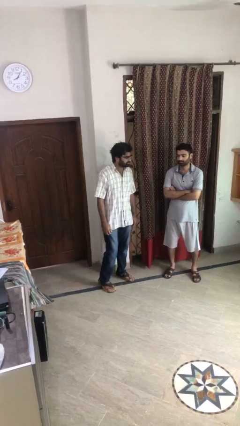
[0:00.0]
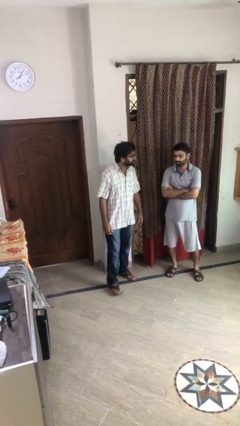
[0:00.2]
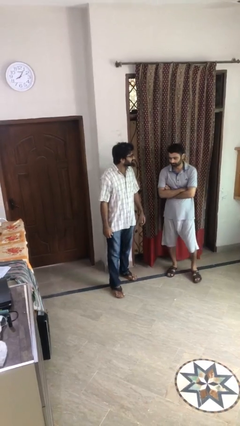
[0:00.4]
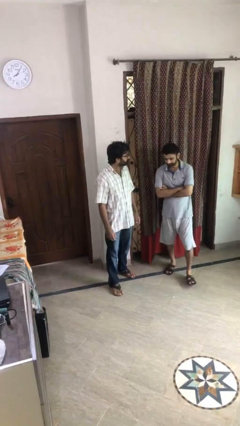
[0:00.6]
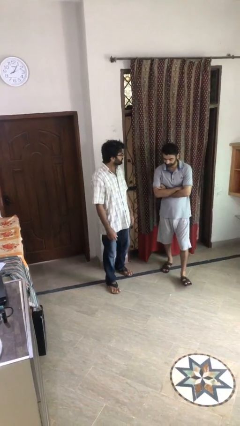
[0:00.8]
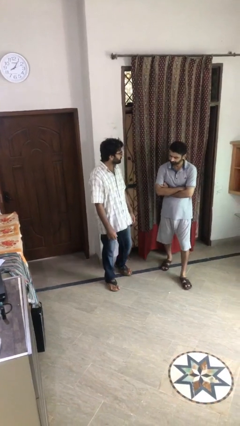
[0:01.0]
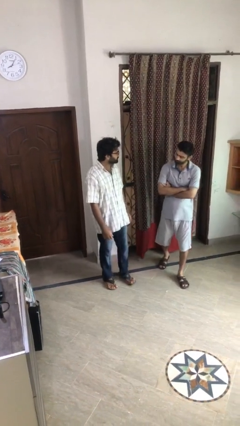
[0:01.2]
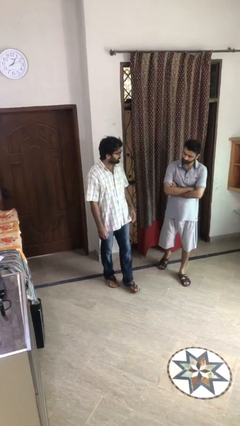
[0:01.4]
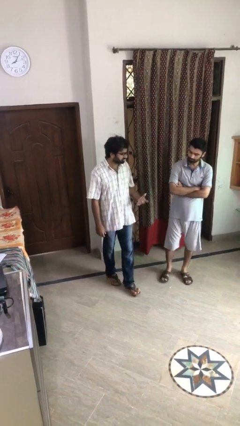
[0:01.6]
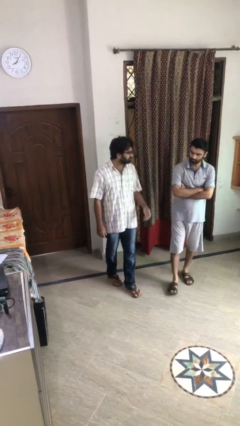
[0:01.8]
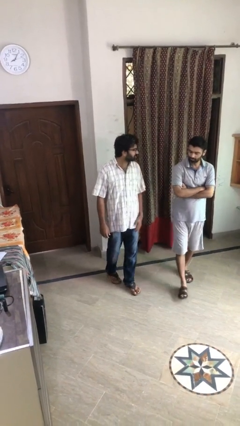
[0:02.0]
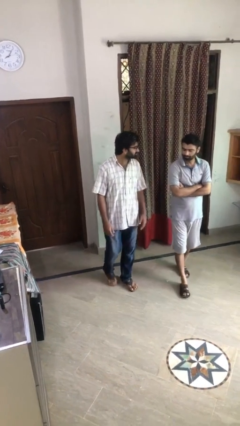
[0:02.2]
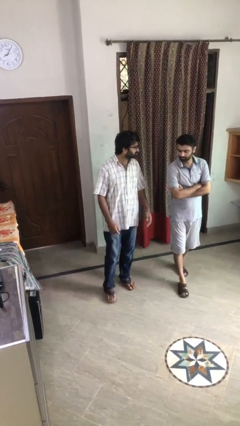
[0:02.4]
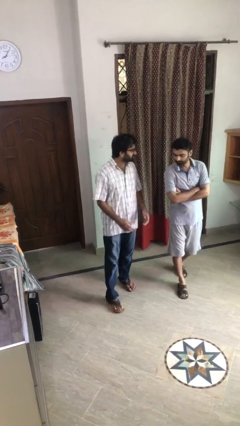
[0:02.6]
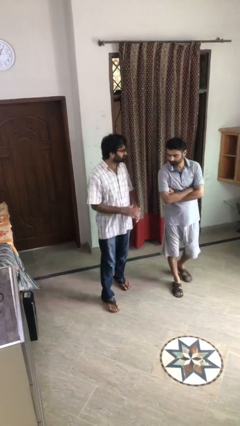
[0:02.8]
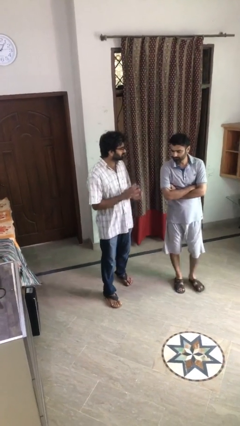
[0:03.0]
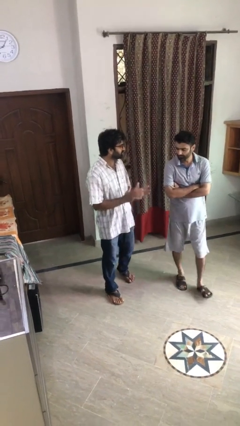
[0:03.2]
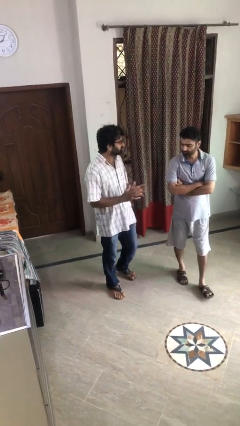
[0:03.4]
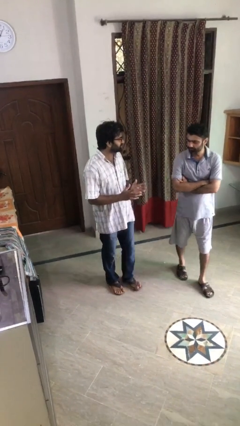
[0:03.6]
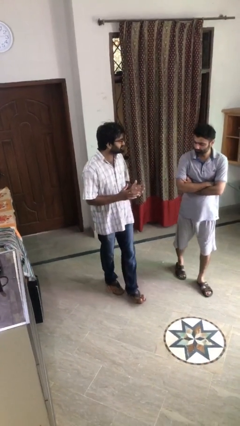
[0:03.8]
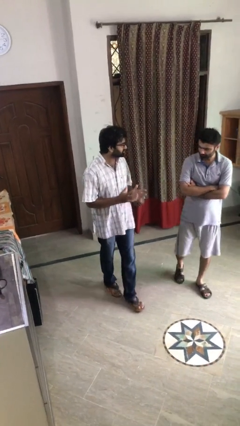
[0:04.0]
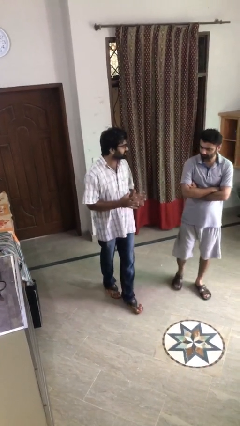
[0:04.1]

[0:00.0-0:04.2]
person talks to person

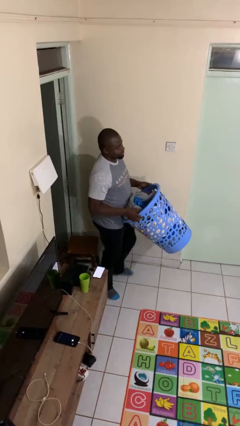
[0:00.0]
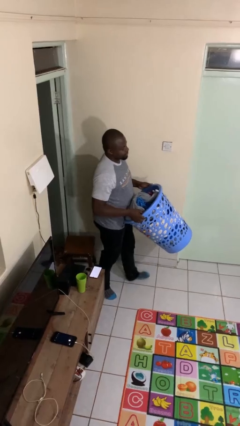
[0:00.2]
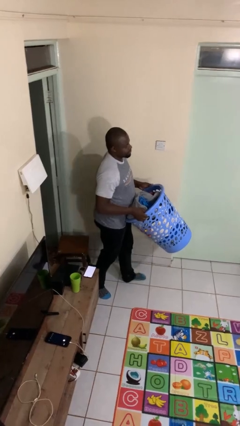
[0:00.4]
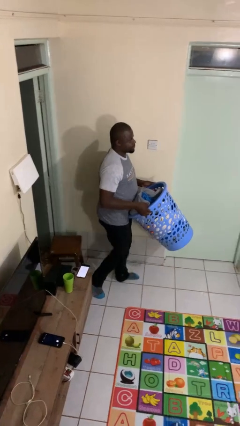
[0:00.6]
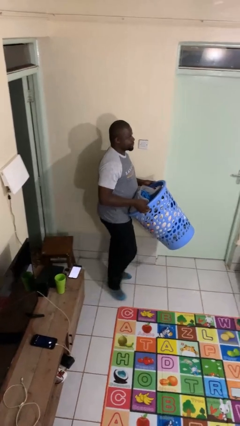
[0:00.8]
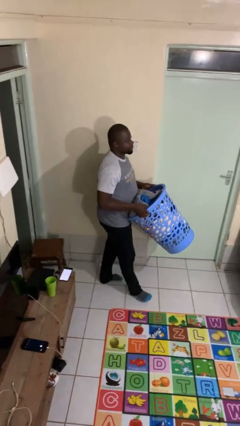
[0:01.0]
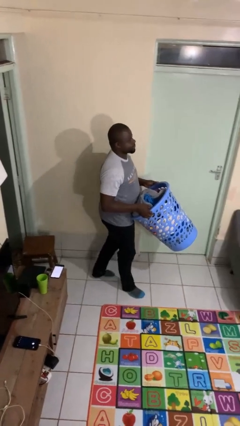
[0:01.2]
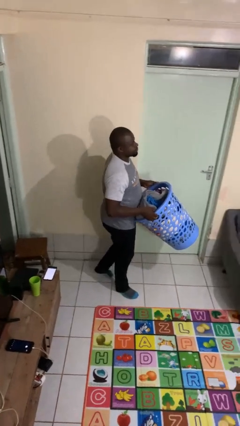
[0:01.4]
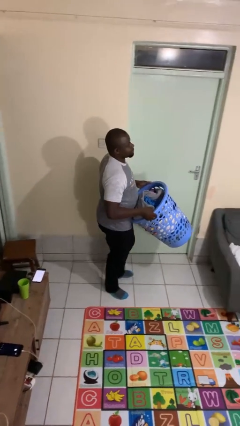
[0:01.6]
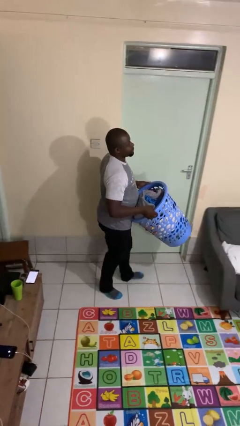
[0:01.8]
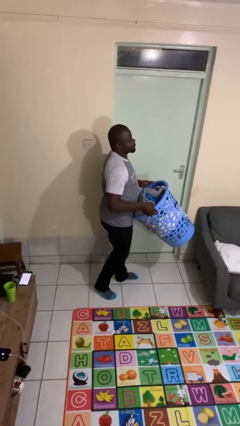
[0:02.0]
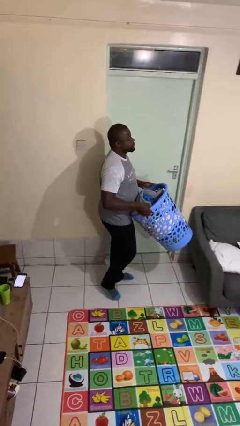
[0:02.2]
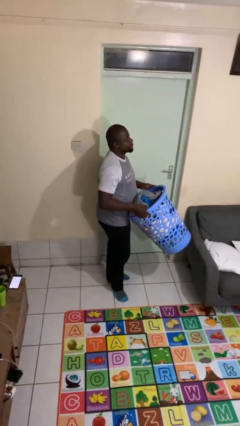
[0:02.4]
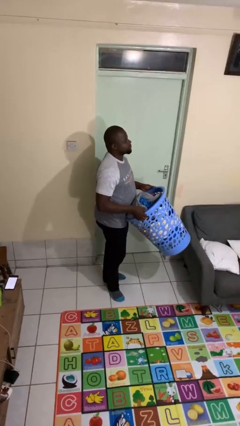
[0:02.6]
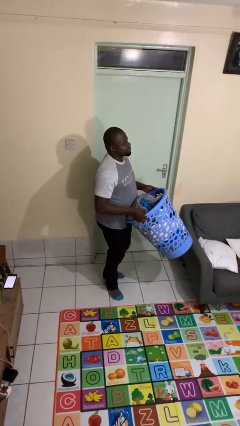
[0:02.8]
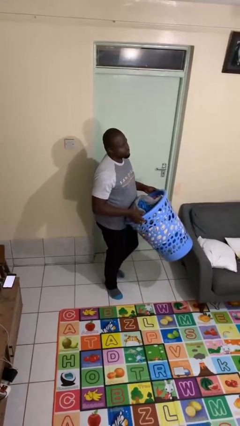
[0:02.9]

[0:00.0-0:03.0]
person carries laundry basket

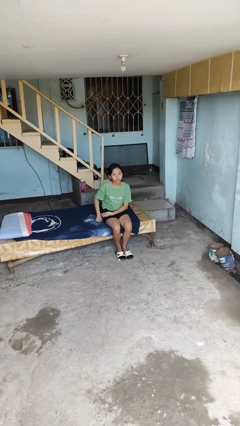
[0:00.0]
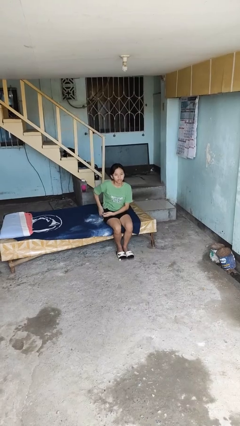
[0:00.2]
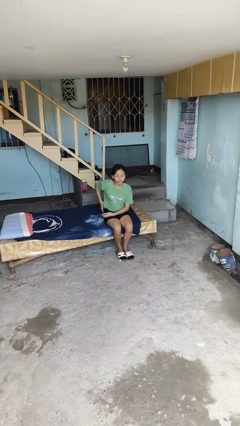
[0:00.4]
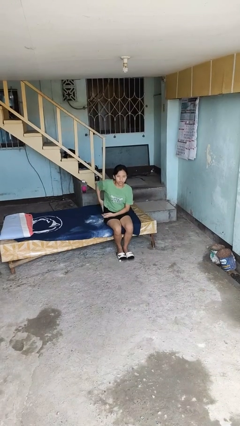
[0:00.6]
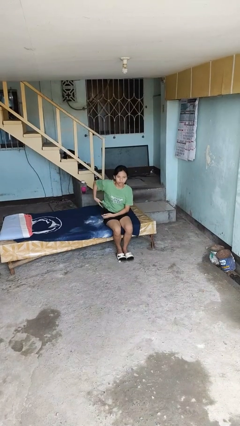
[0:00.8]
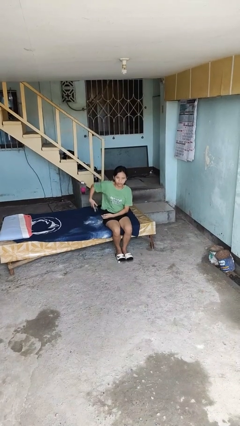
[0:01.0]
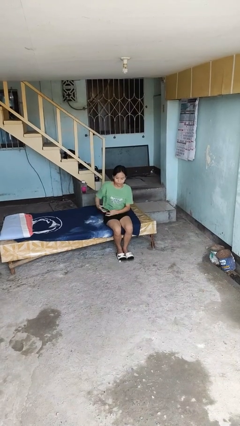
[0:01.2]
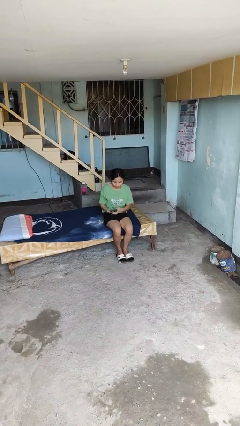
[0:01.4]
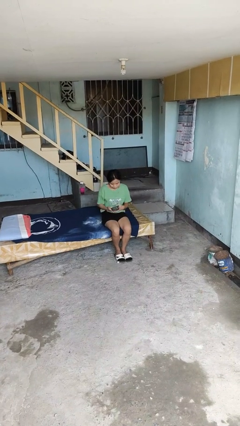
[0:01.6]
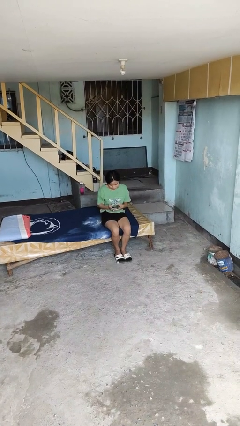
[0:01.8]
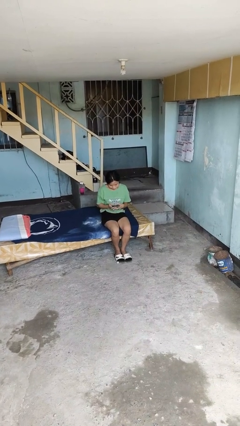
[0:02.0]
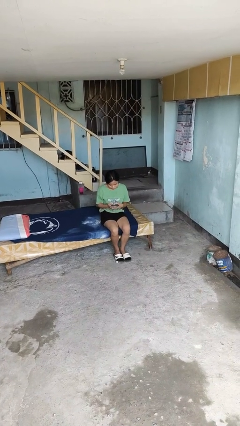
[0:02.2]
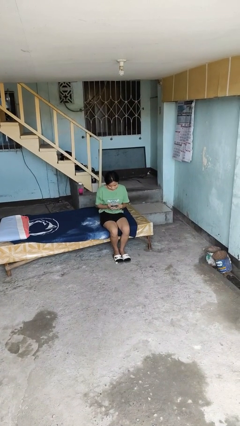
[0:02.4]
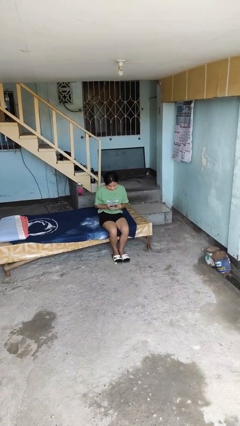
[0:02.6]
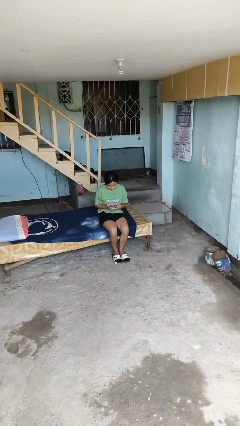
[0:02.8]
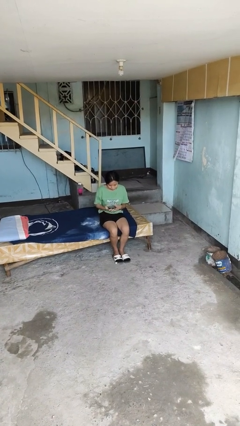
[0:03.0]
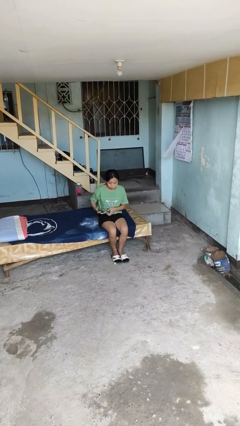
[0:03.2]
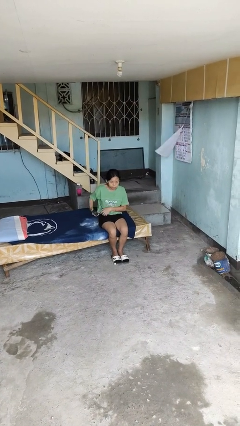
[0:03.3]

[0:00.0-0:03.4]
person takes phone from pocket

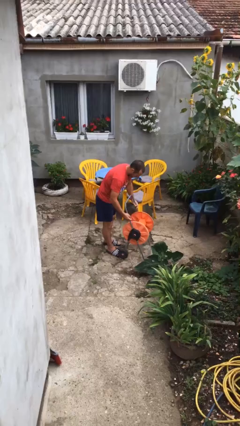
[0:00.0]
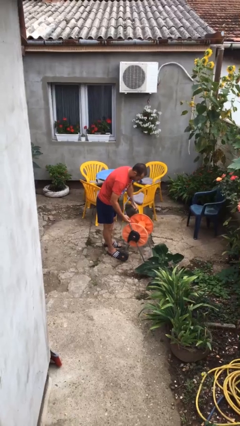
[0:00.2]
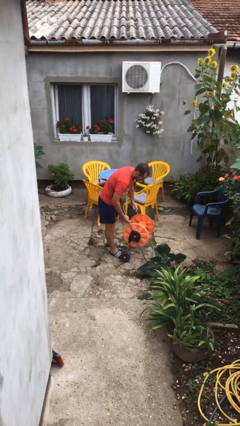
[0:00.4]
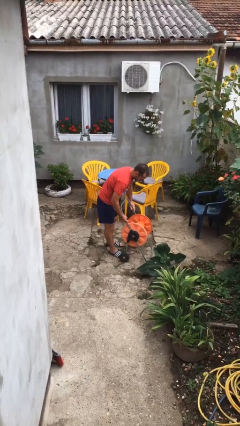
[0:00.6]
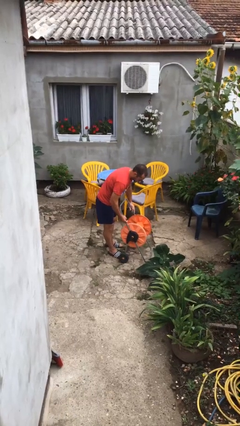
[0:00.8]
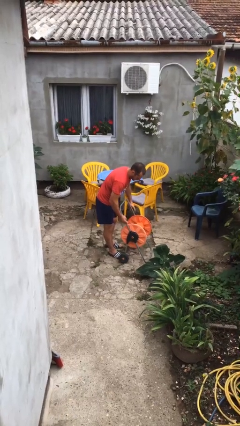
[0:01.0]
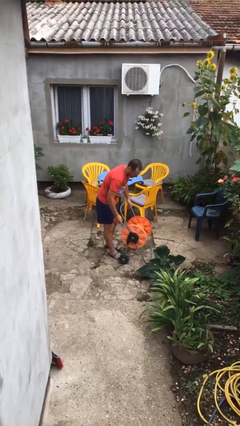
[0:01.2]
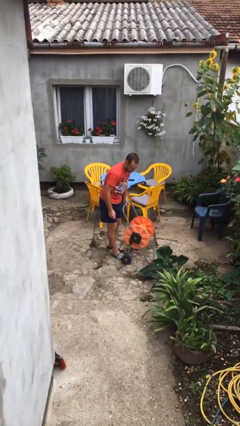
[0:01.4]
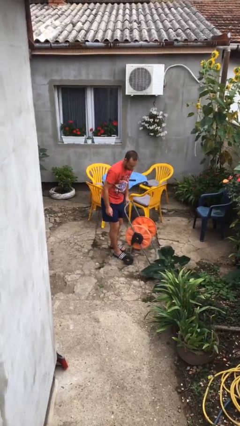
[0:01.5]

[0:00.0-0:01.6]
person puts down object on floor

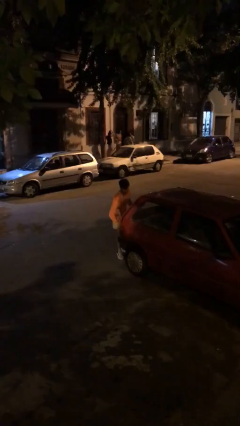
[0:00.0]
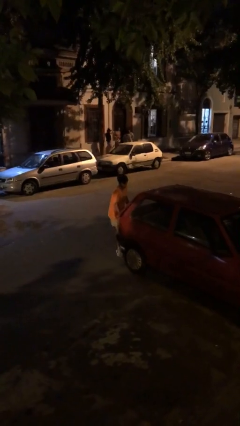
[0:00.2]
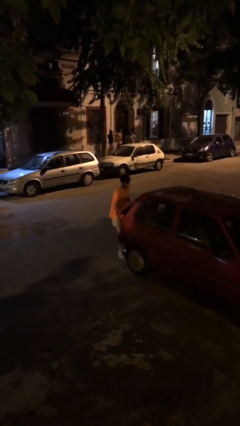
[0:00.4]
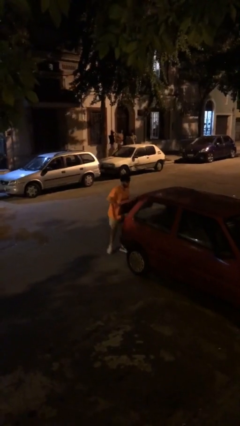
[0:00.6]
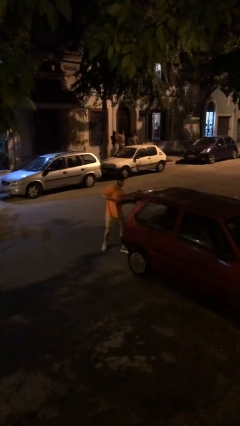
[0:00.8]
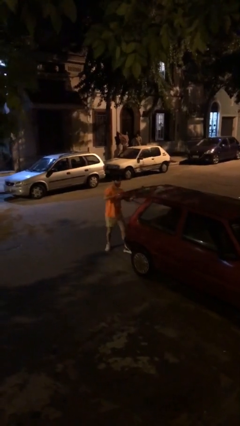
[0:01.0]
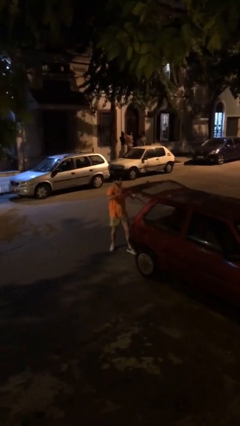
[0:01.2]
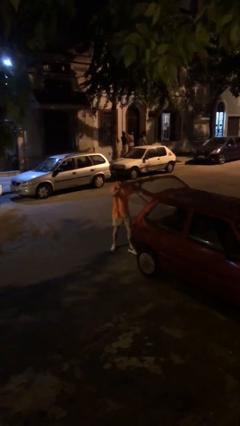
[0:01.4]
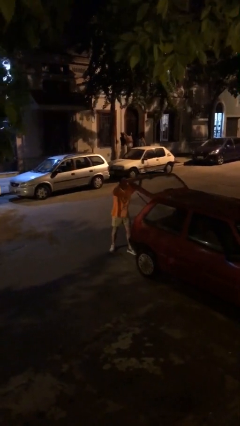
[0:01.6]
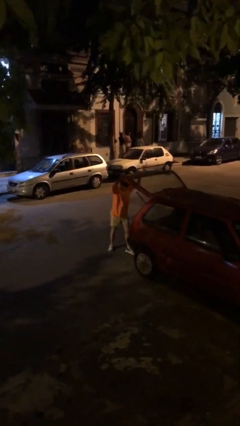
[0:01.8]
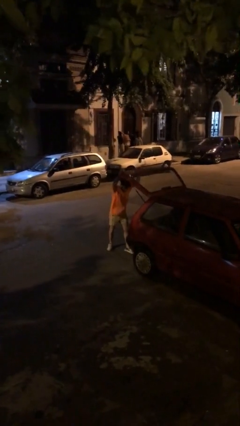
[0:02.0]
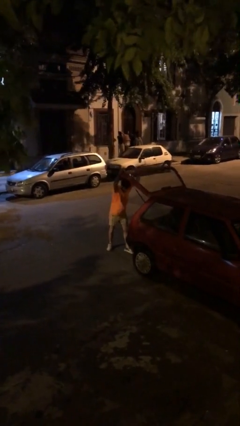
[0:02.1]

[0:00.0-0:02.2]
person opens car trunk

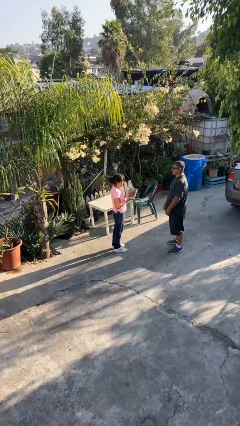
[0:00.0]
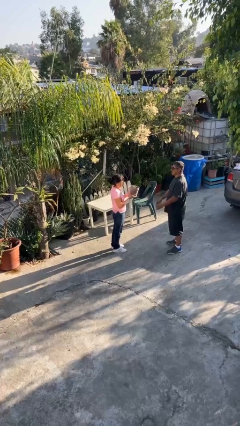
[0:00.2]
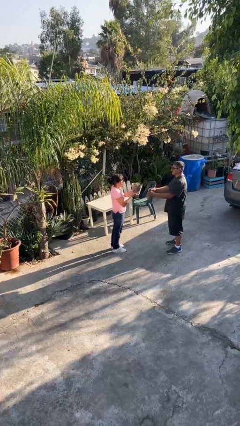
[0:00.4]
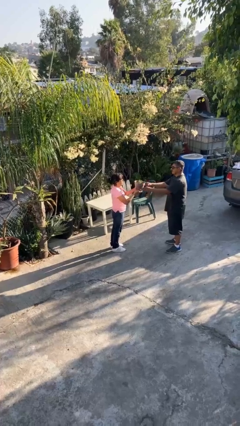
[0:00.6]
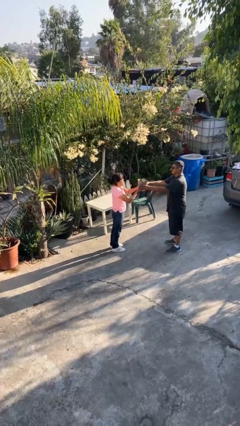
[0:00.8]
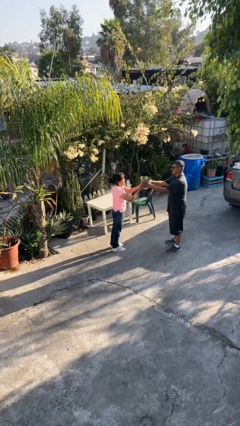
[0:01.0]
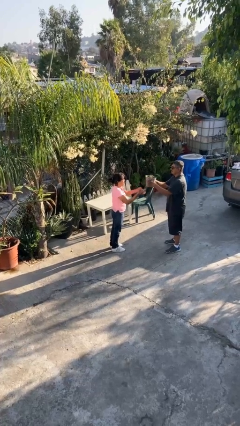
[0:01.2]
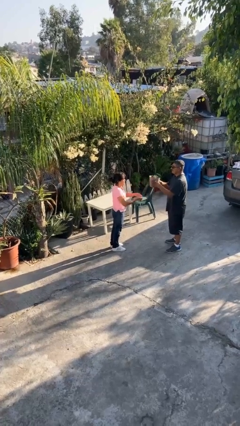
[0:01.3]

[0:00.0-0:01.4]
person transfers object to person

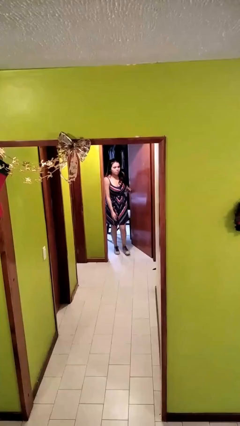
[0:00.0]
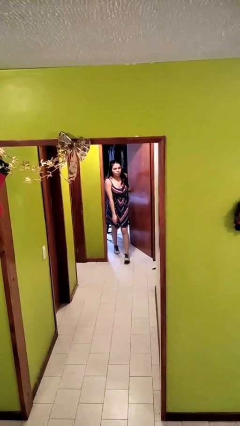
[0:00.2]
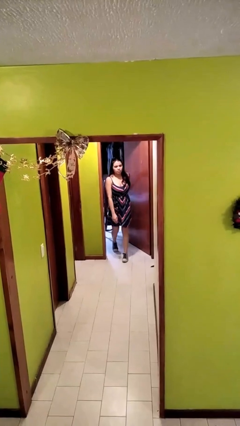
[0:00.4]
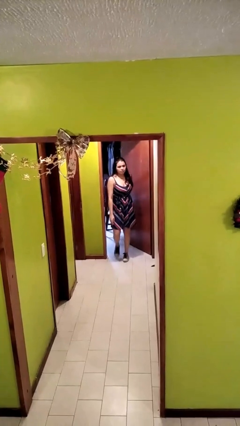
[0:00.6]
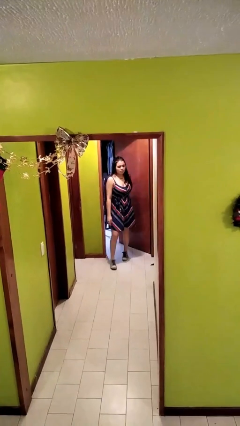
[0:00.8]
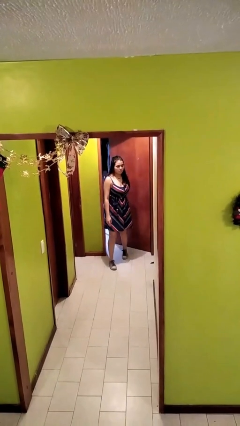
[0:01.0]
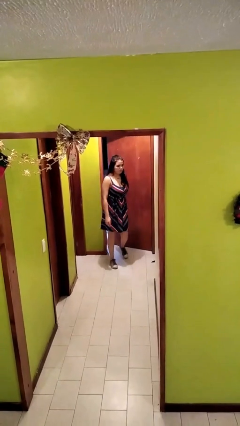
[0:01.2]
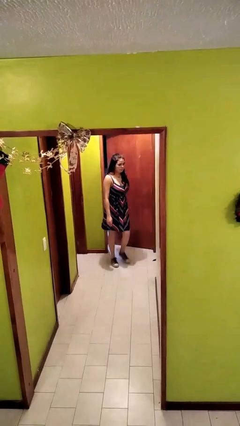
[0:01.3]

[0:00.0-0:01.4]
person closes facility door
